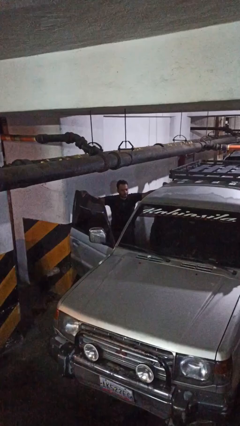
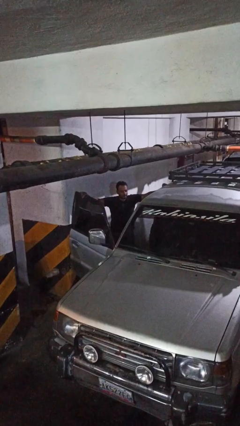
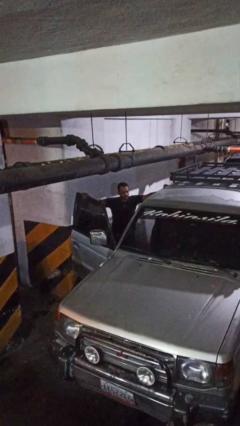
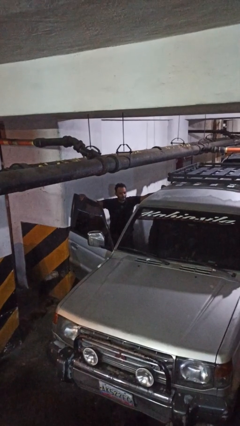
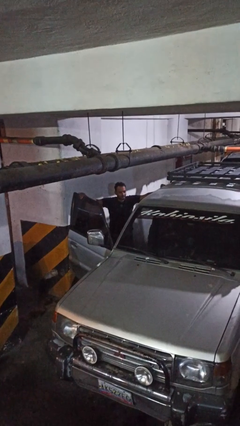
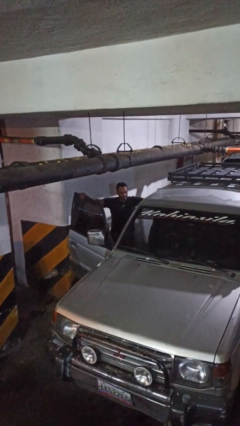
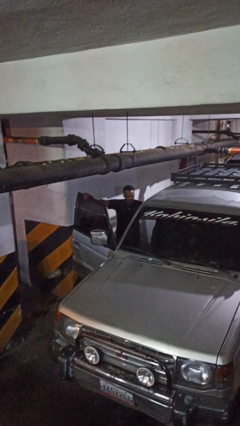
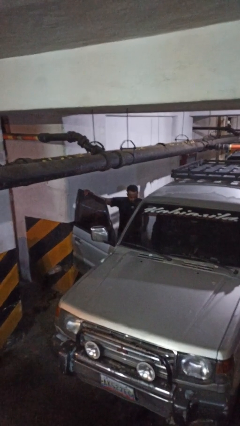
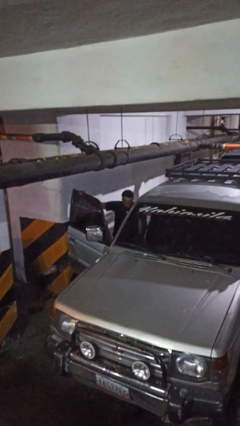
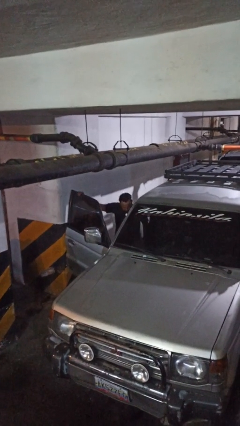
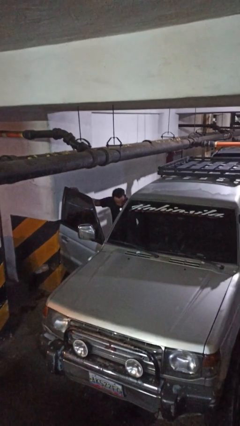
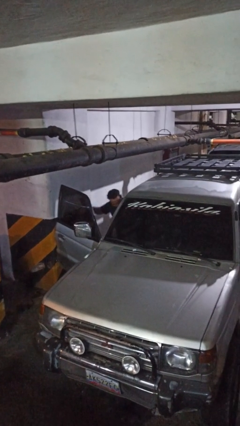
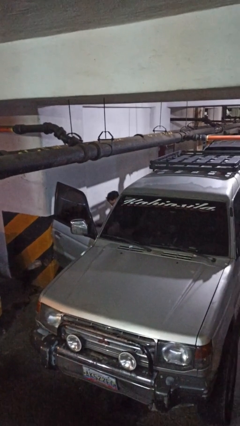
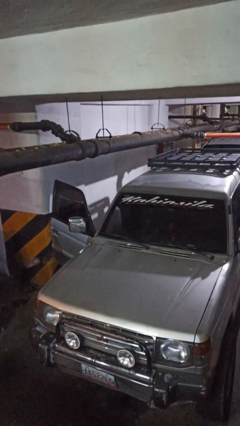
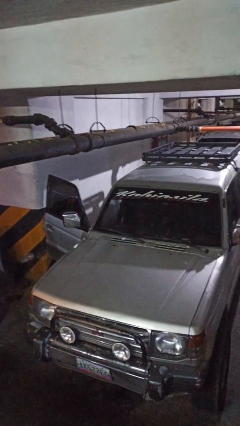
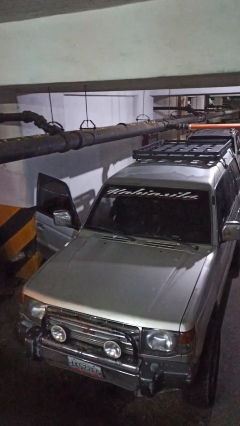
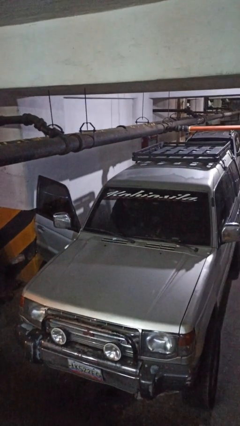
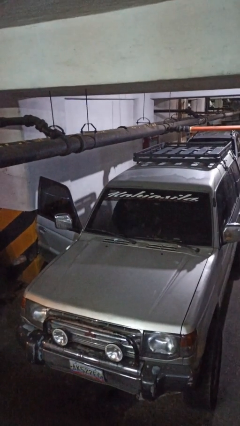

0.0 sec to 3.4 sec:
person enters car

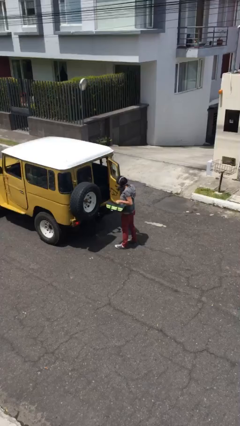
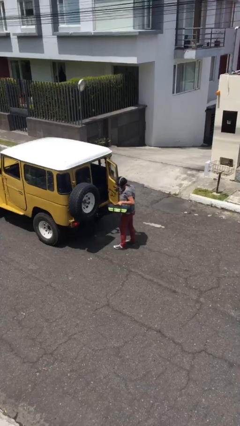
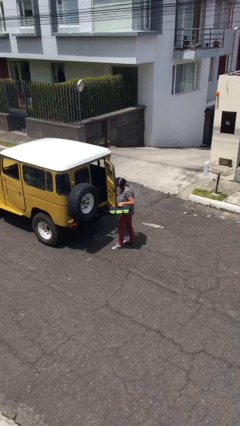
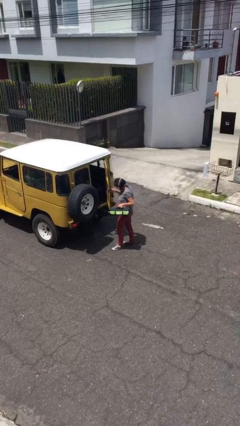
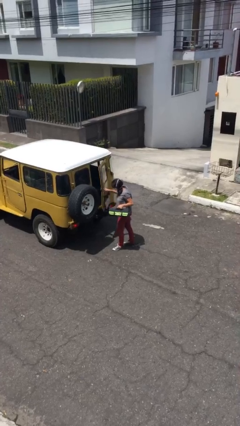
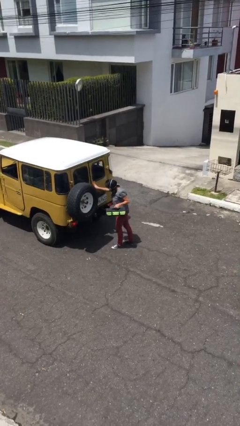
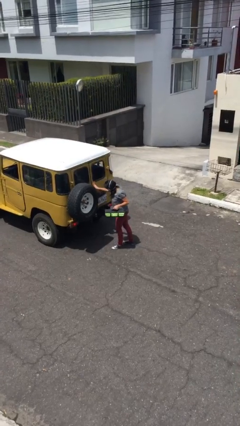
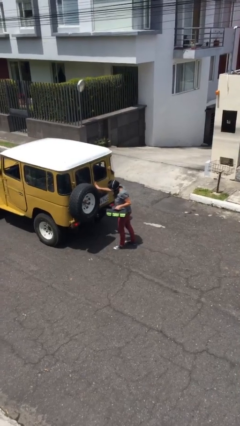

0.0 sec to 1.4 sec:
person closes car door

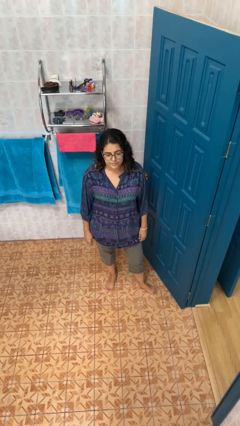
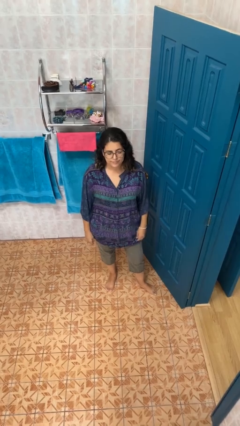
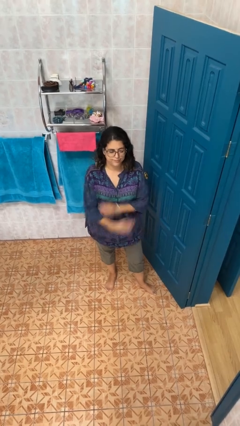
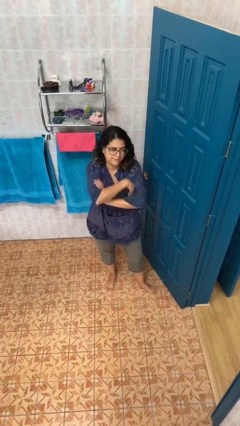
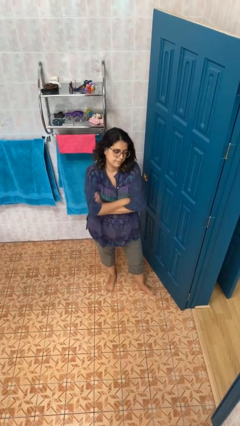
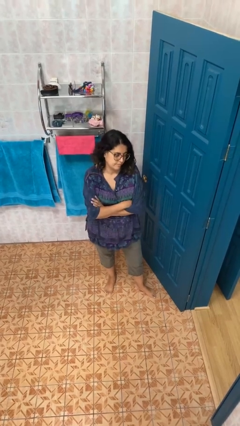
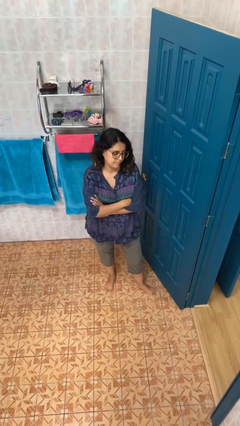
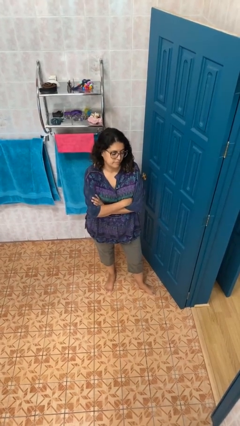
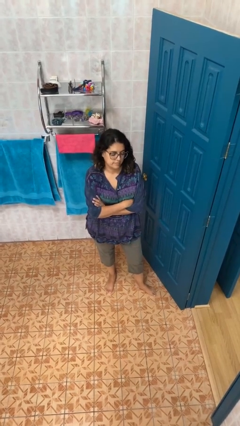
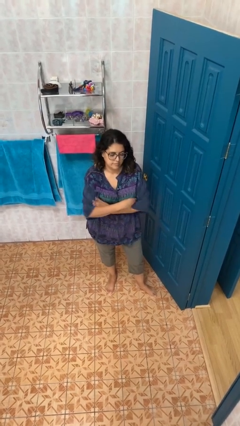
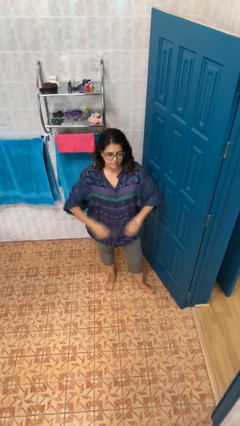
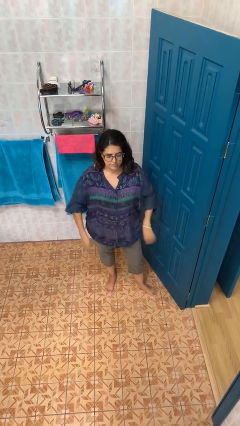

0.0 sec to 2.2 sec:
person crosses arms

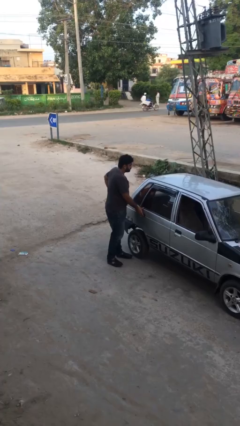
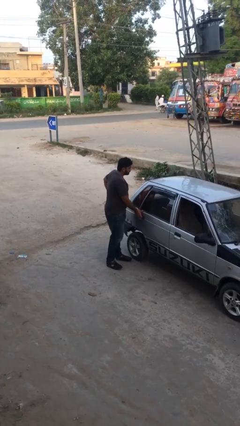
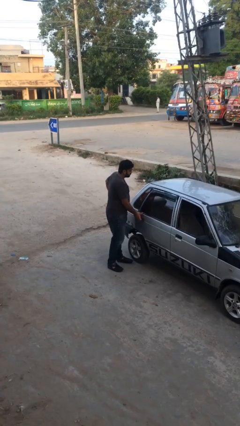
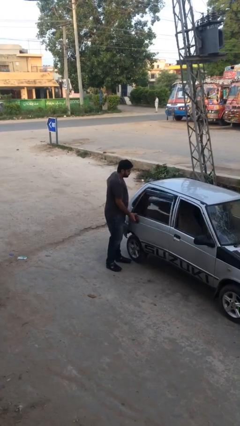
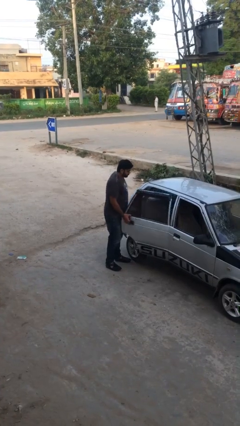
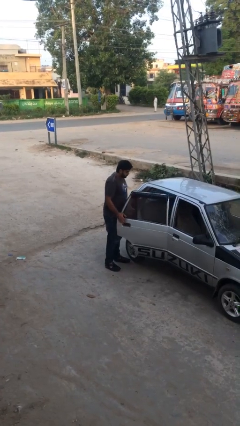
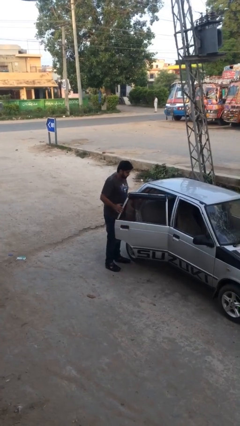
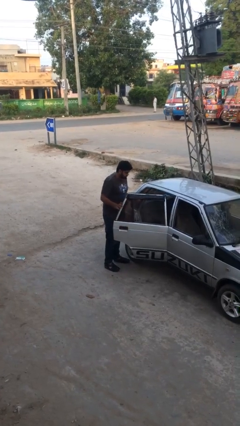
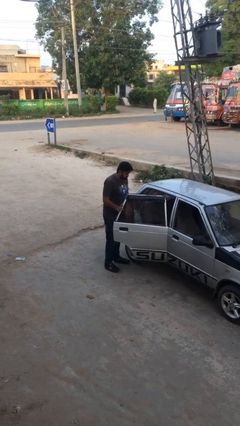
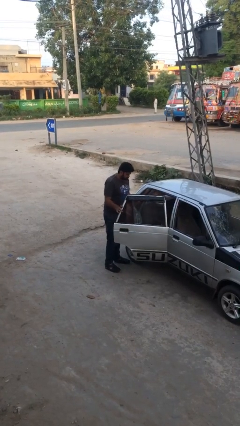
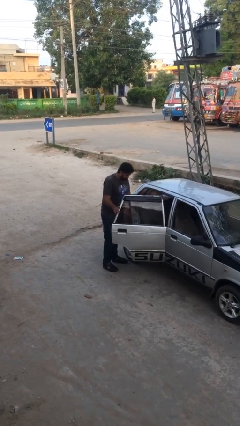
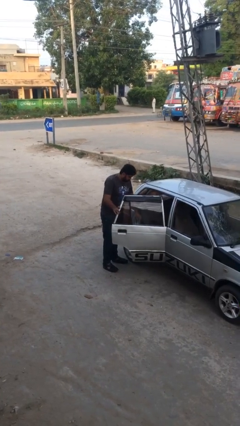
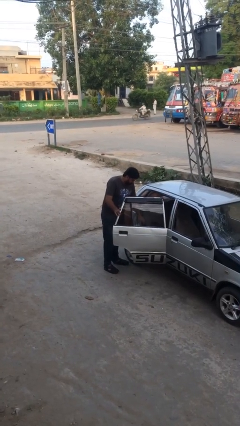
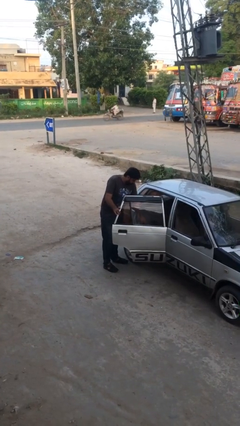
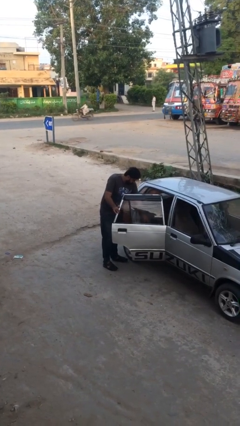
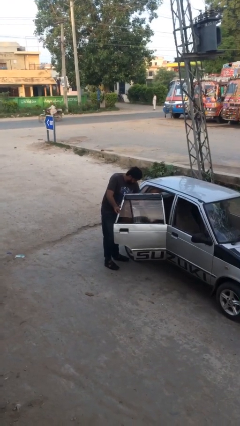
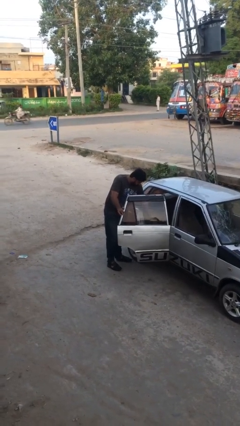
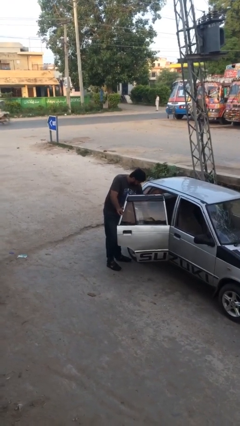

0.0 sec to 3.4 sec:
person opens car door

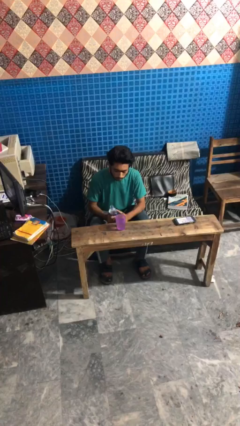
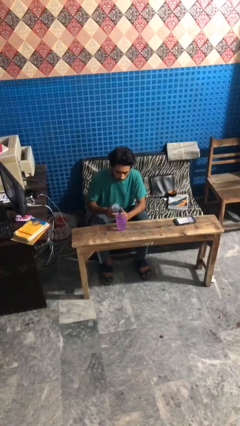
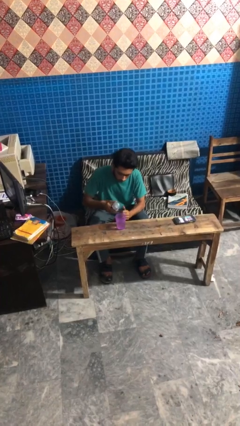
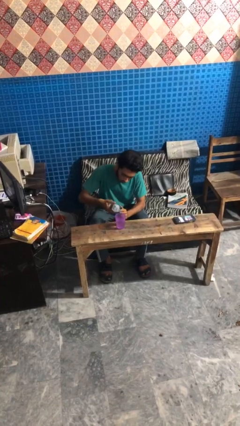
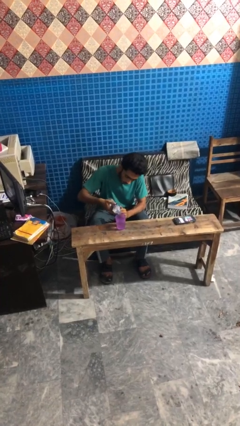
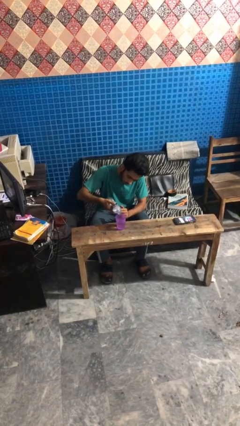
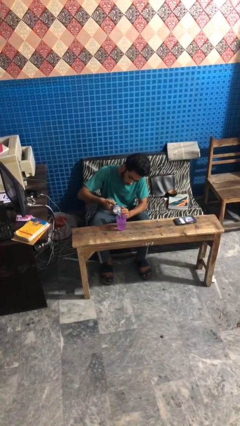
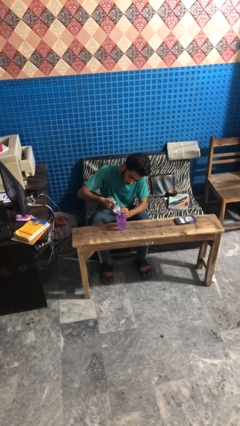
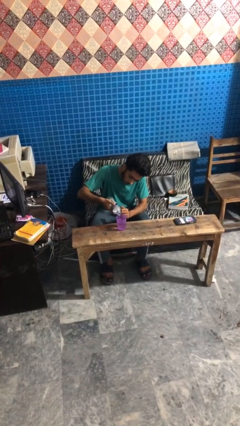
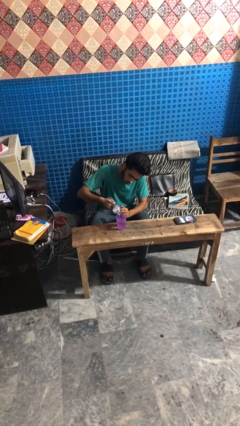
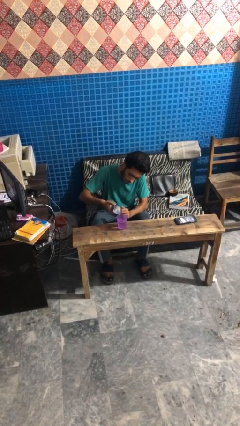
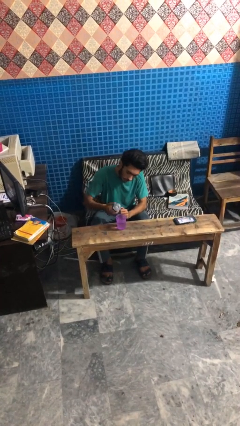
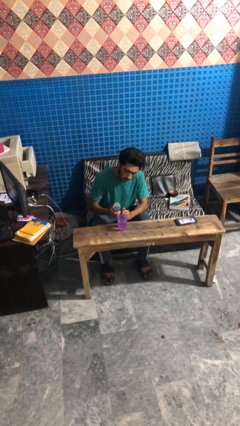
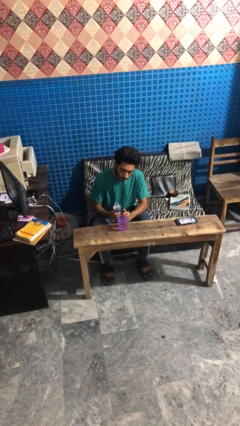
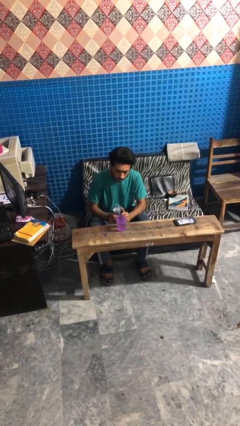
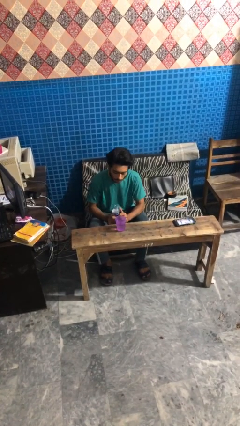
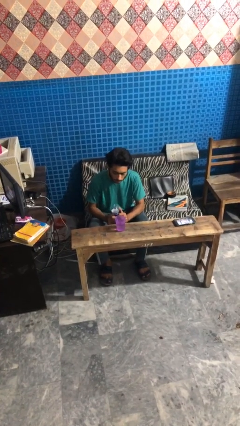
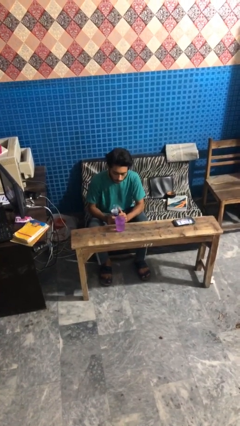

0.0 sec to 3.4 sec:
person pours liquid into cup

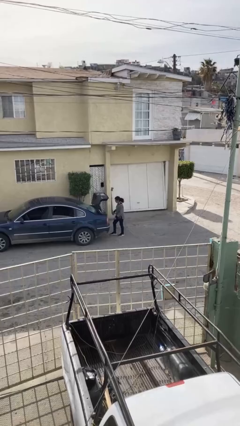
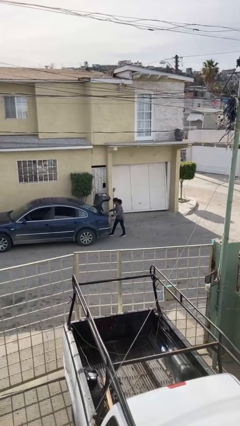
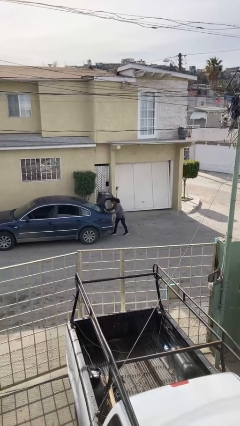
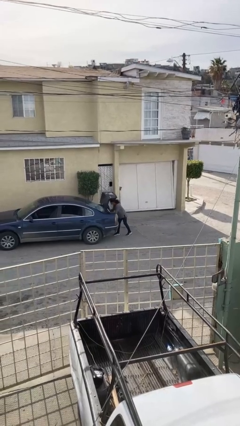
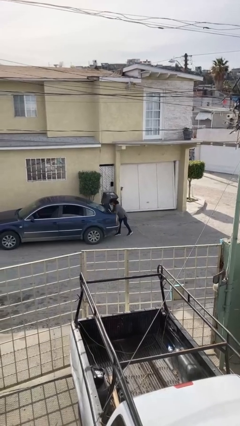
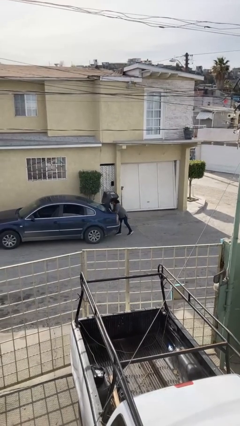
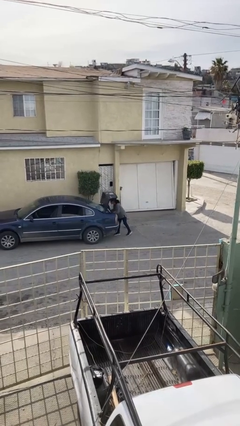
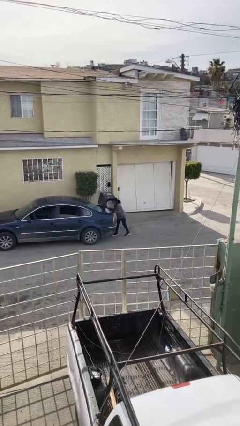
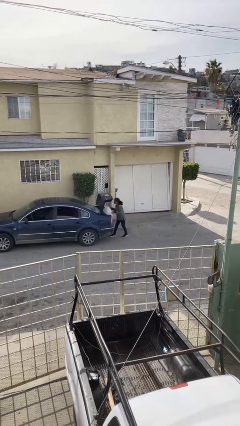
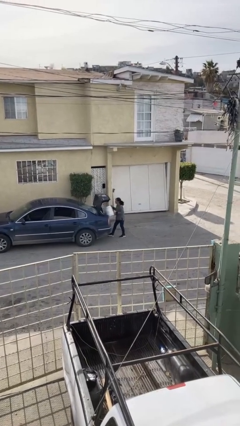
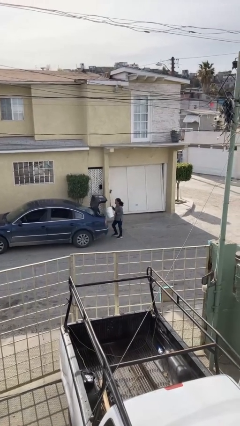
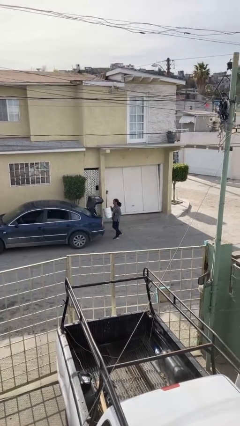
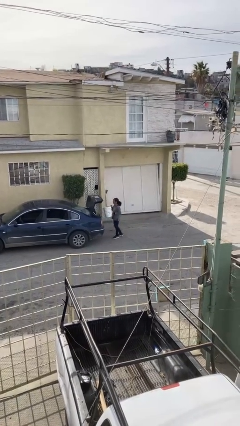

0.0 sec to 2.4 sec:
person unloads car

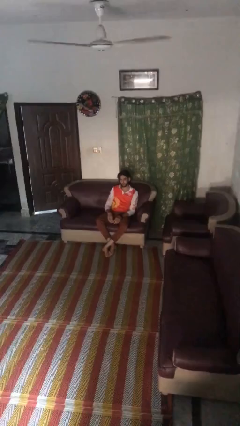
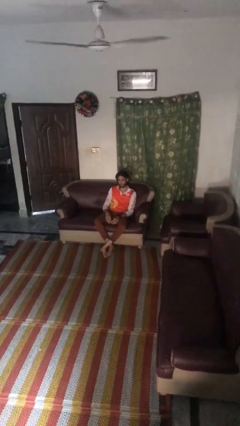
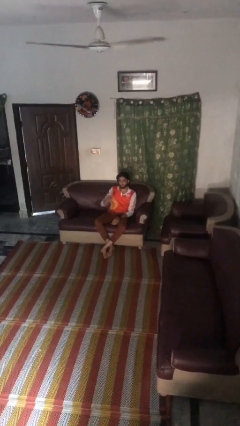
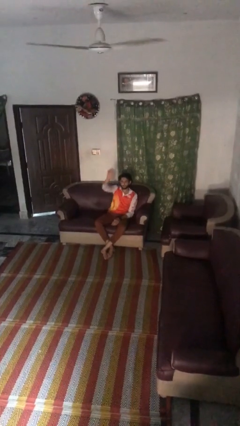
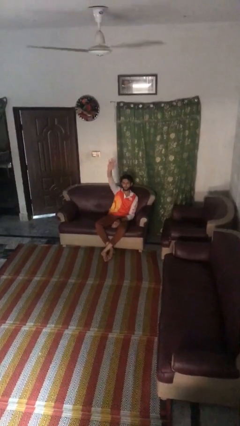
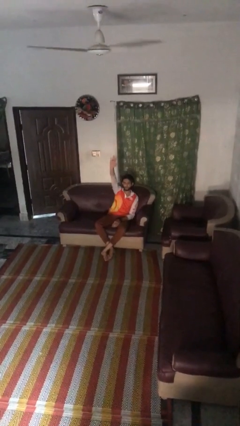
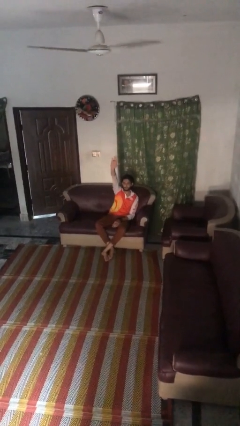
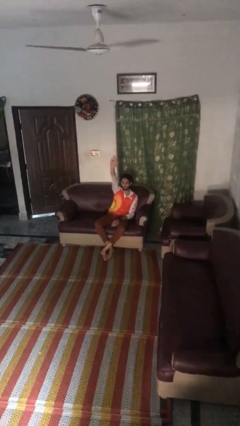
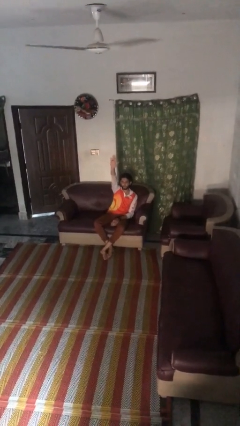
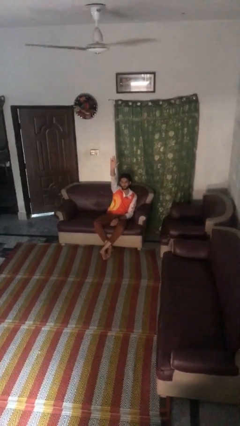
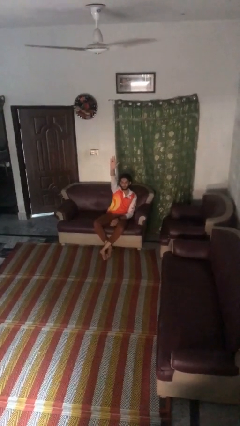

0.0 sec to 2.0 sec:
person gestures raise hand
